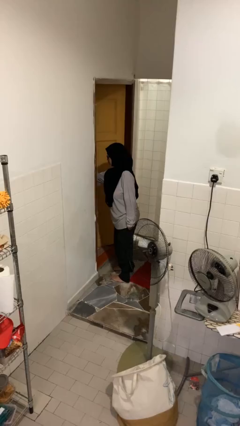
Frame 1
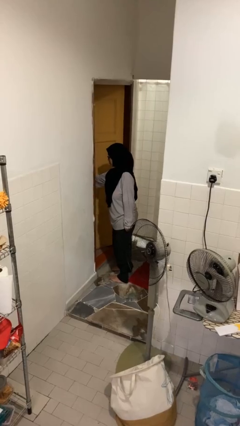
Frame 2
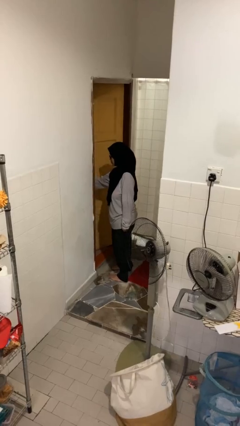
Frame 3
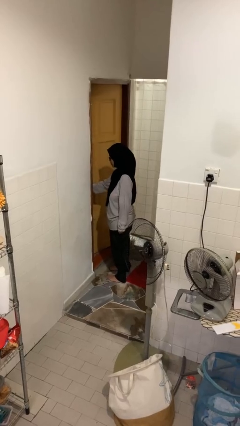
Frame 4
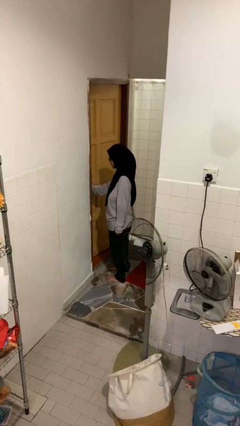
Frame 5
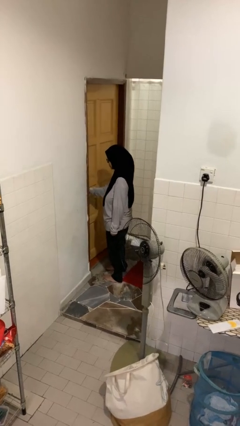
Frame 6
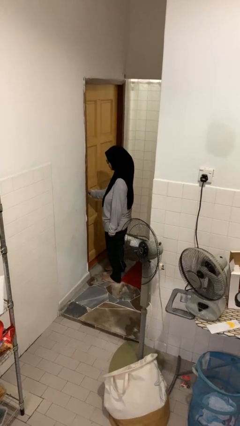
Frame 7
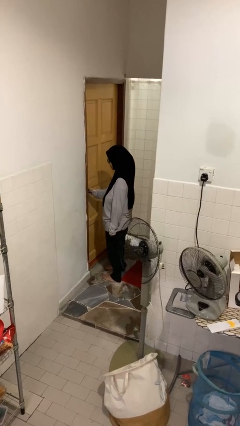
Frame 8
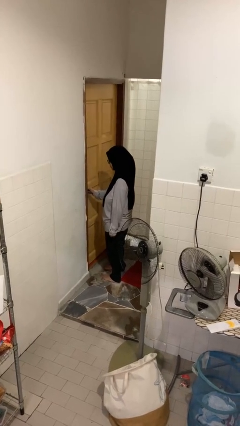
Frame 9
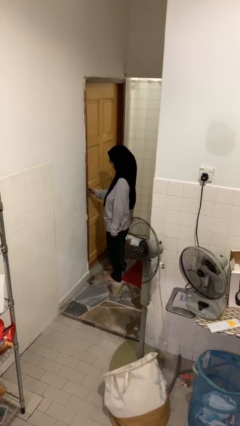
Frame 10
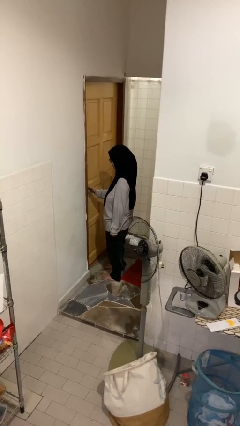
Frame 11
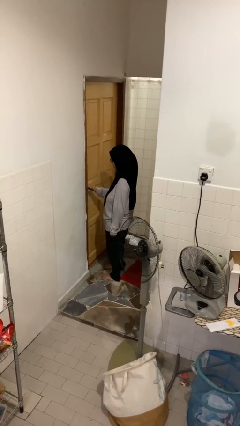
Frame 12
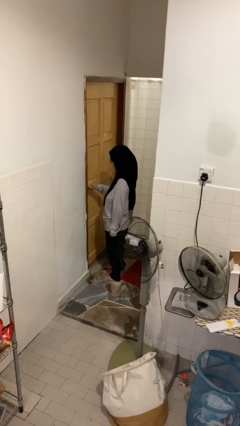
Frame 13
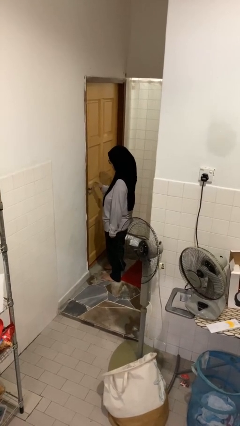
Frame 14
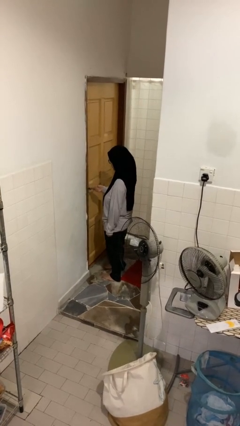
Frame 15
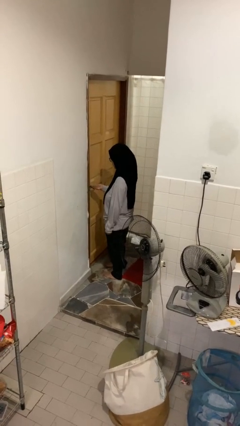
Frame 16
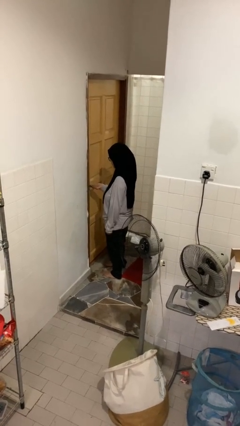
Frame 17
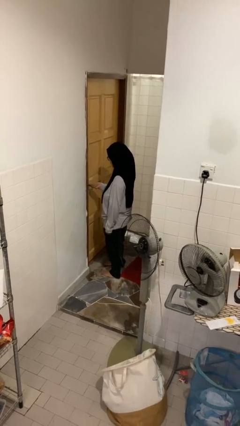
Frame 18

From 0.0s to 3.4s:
person closes facility door

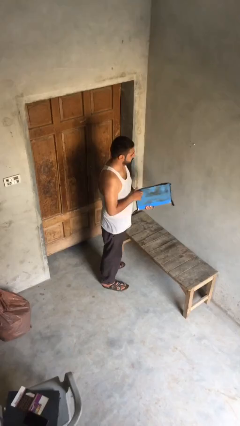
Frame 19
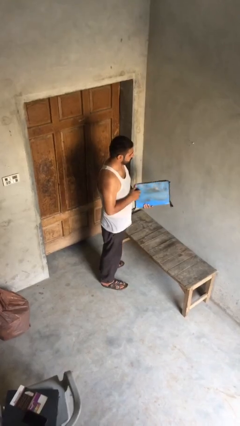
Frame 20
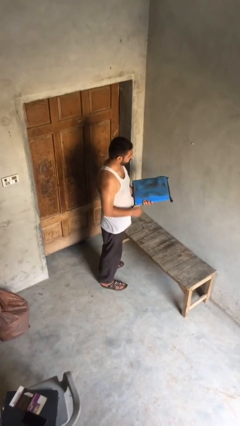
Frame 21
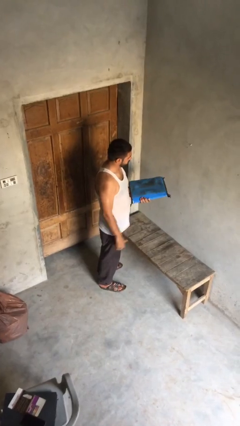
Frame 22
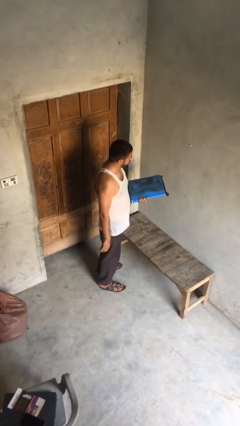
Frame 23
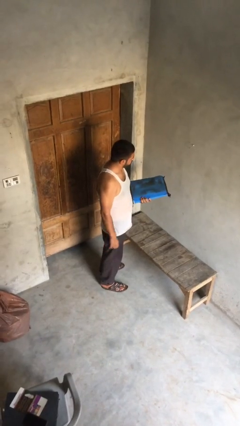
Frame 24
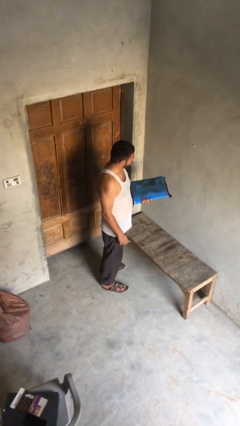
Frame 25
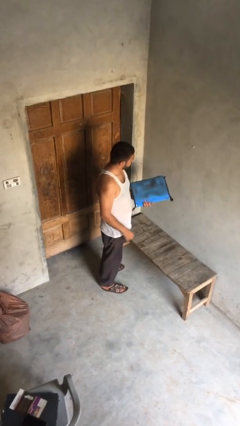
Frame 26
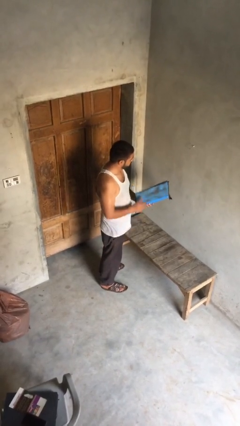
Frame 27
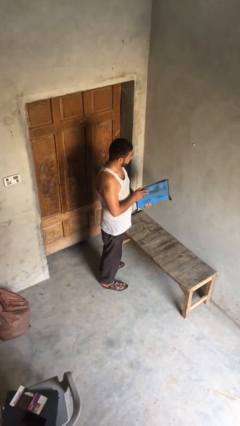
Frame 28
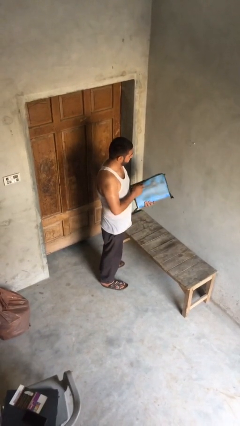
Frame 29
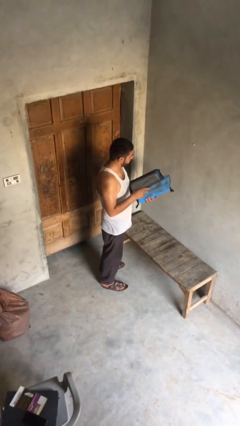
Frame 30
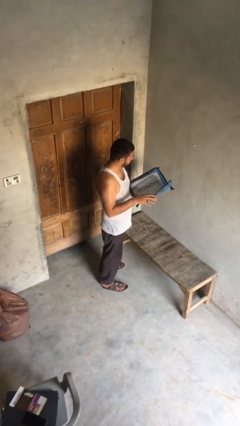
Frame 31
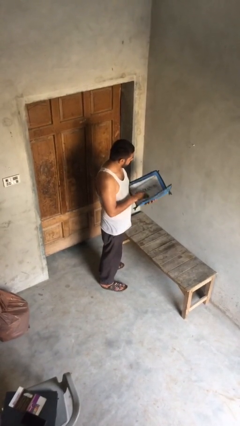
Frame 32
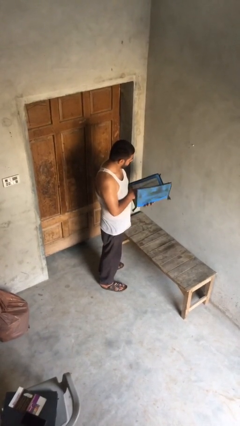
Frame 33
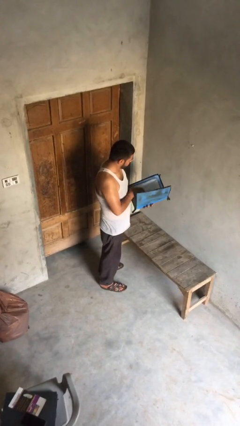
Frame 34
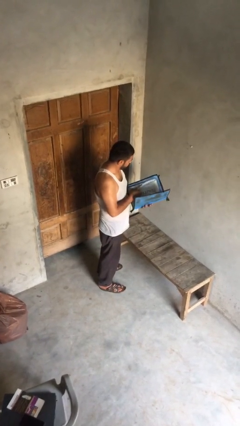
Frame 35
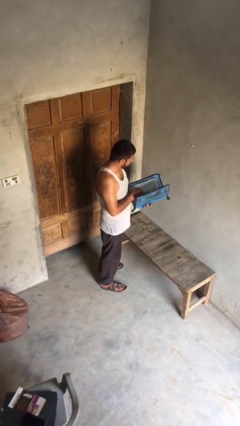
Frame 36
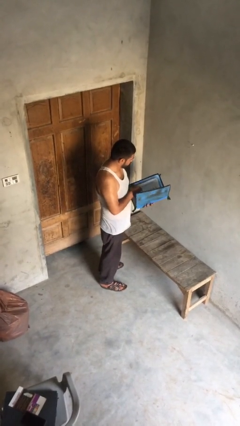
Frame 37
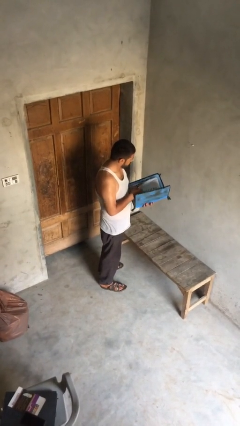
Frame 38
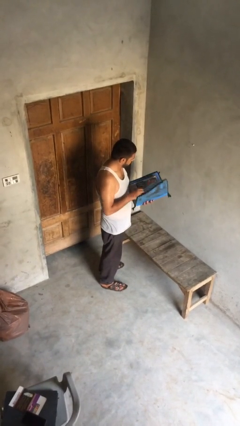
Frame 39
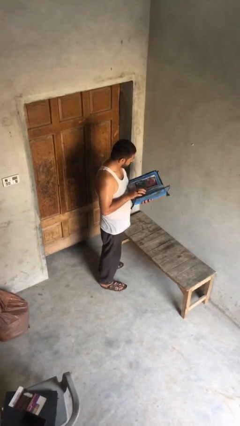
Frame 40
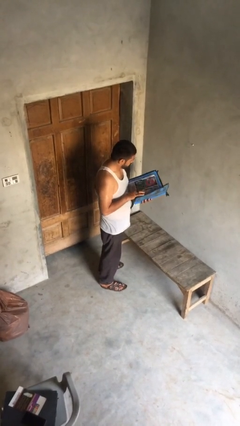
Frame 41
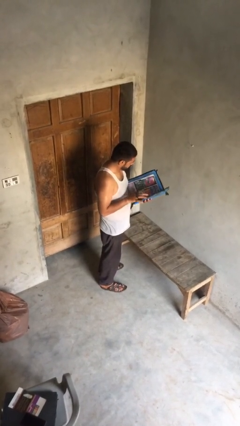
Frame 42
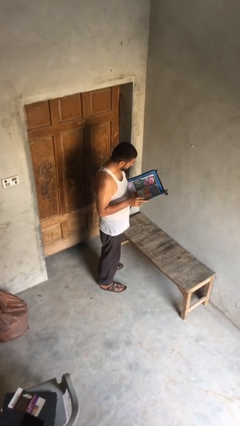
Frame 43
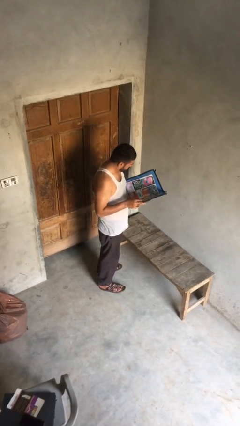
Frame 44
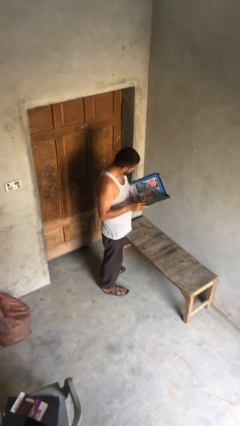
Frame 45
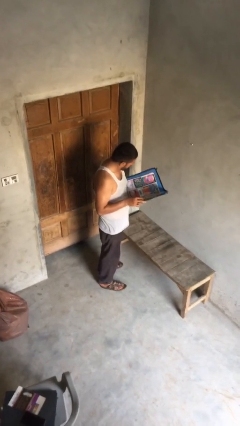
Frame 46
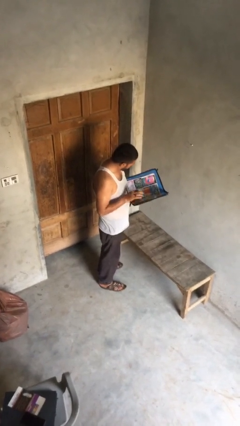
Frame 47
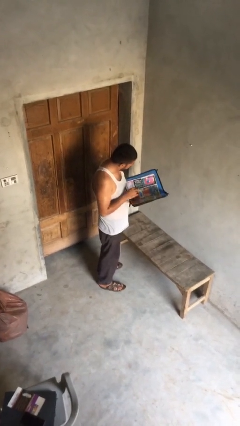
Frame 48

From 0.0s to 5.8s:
person reads document

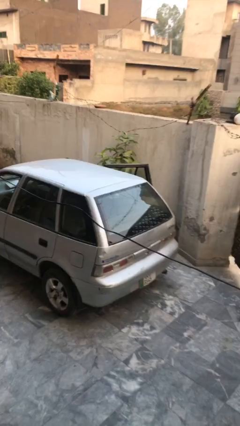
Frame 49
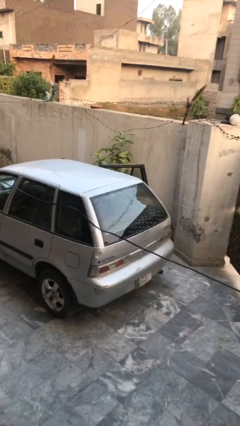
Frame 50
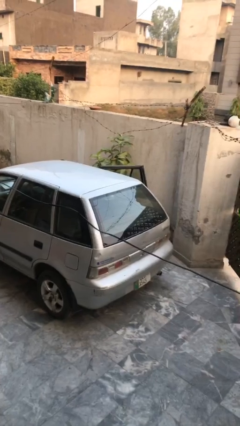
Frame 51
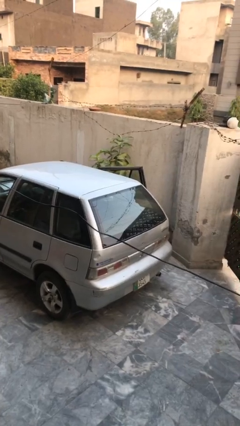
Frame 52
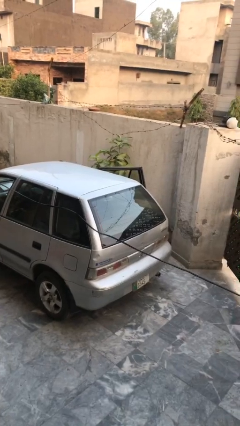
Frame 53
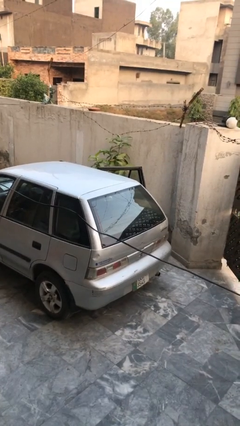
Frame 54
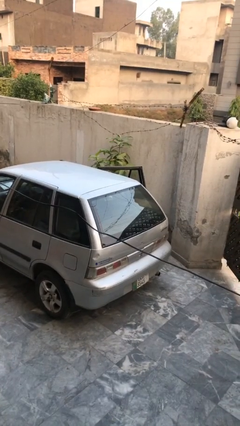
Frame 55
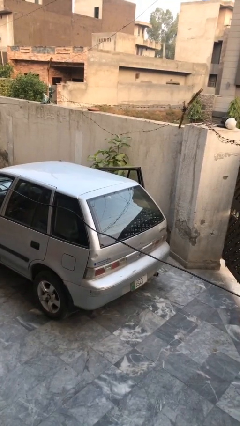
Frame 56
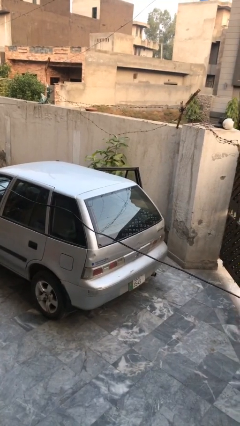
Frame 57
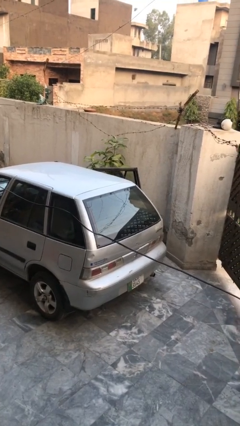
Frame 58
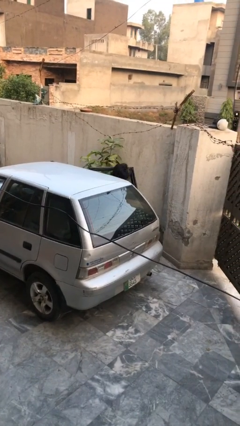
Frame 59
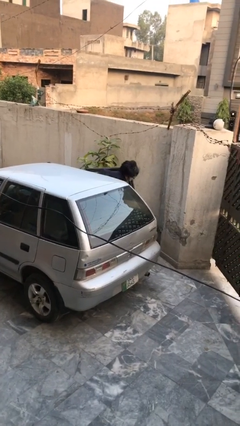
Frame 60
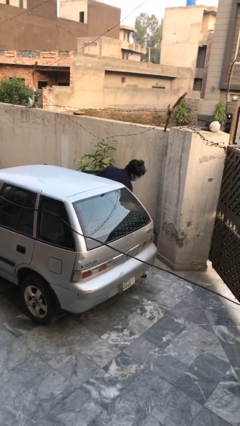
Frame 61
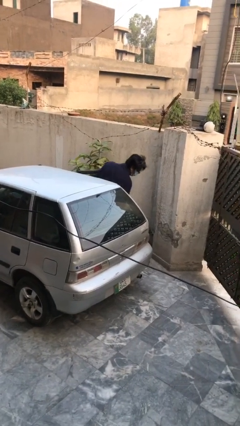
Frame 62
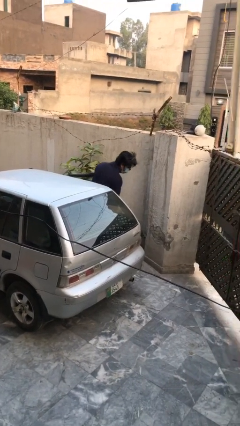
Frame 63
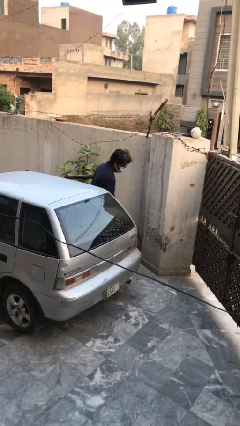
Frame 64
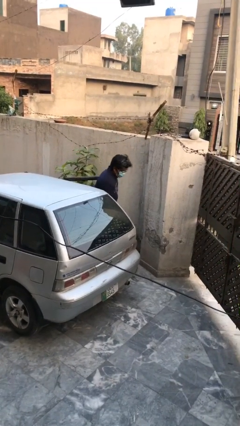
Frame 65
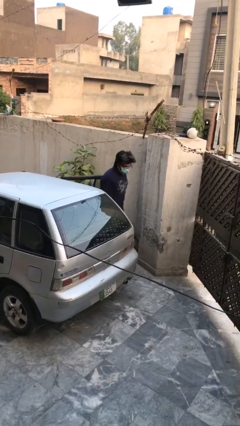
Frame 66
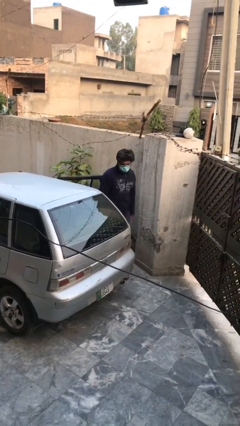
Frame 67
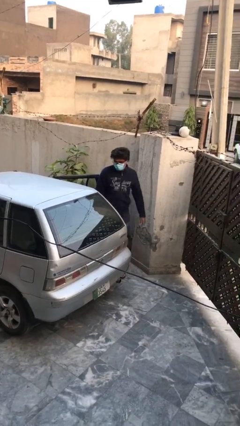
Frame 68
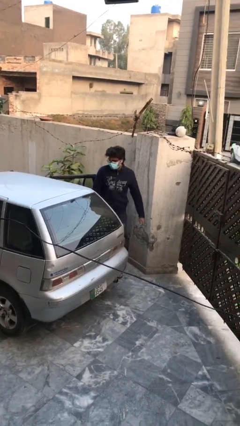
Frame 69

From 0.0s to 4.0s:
person exits car

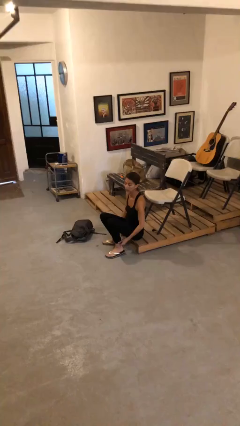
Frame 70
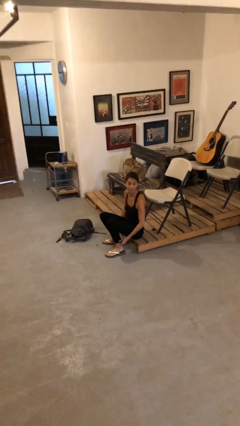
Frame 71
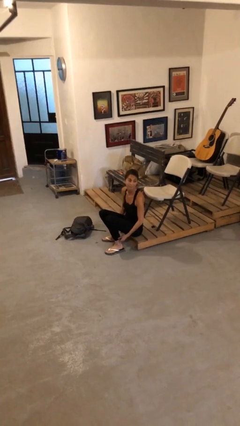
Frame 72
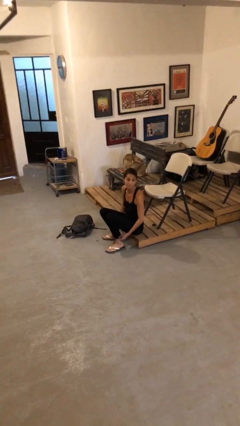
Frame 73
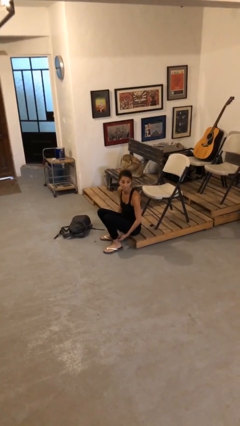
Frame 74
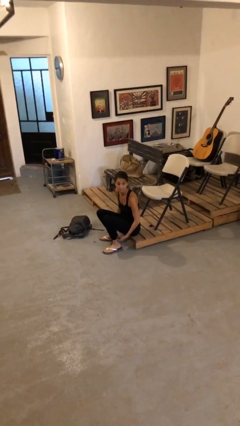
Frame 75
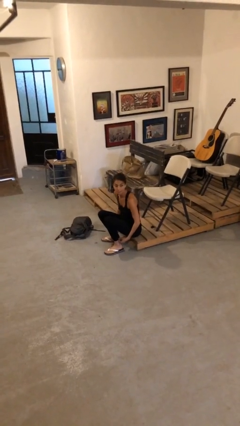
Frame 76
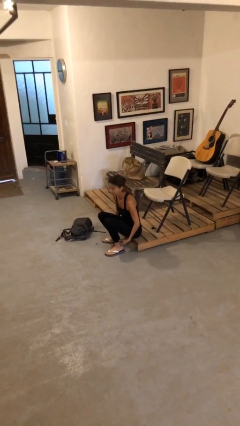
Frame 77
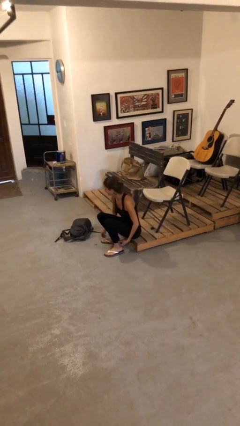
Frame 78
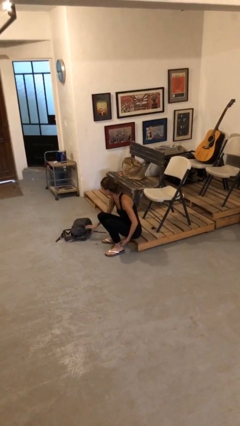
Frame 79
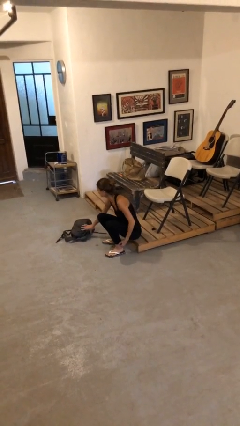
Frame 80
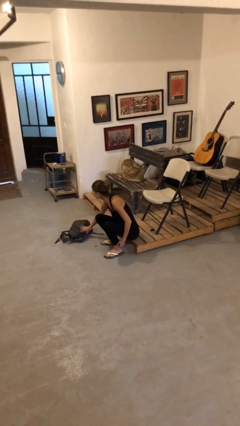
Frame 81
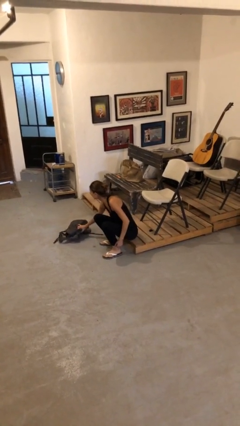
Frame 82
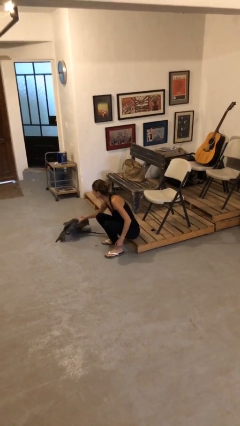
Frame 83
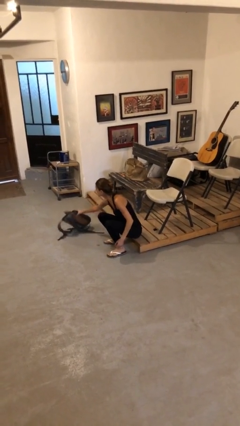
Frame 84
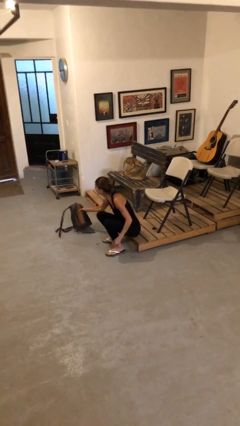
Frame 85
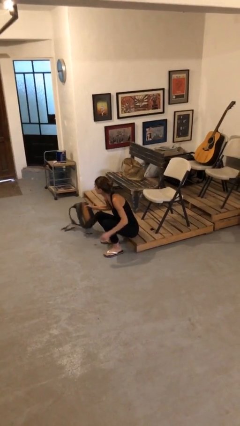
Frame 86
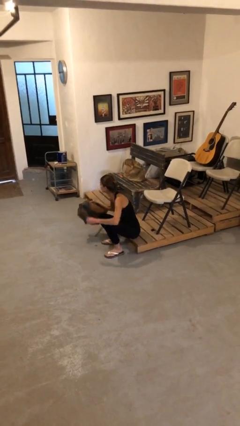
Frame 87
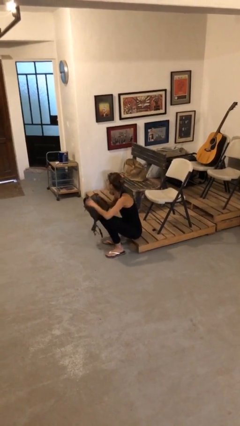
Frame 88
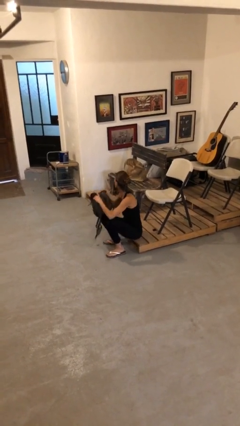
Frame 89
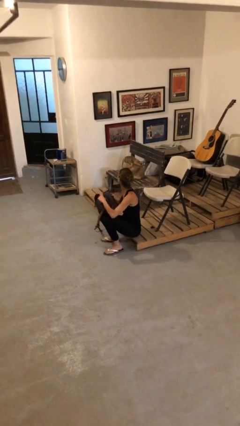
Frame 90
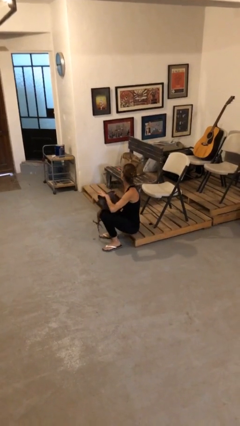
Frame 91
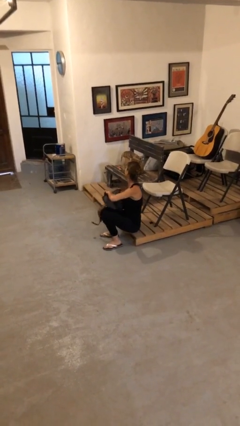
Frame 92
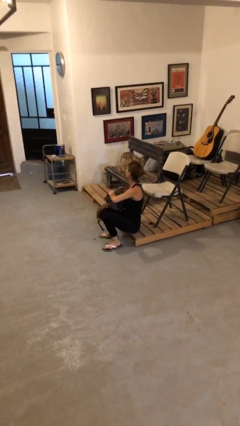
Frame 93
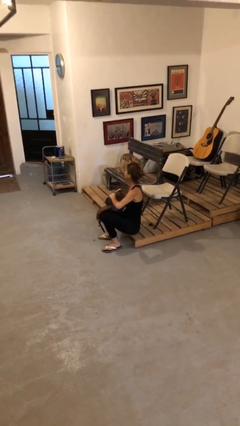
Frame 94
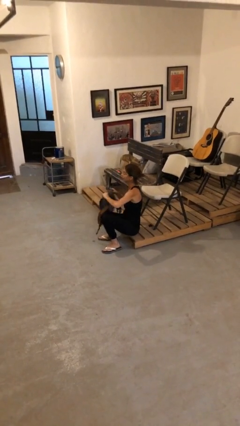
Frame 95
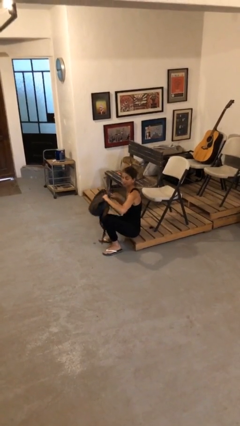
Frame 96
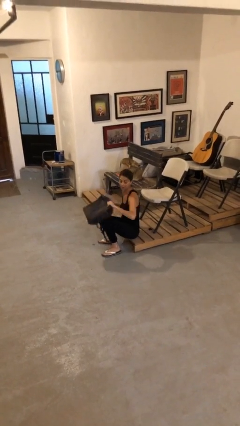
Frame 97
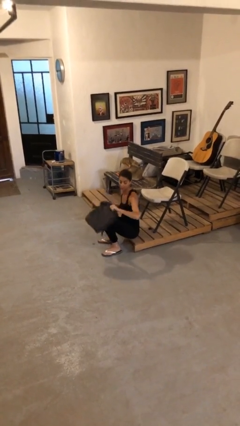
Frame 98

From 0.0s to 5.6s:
person picks up object from floor
